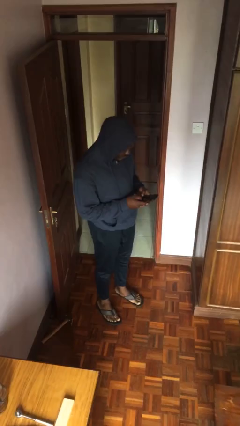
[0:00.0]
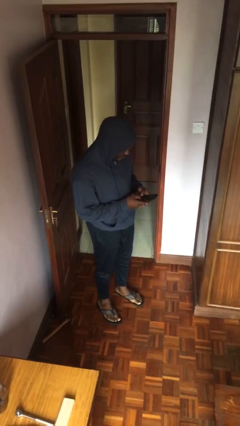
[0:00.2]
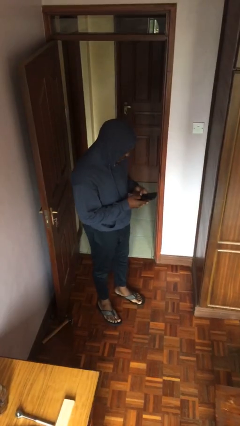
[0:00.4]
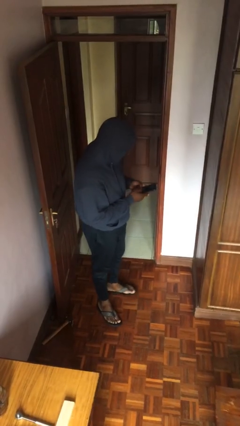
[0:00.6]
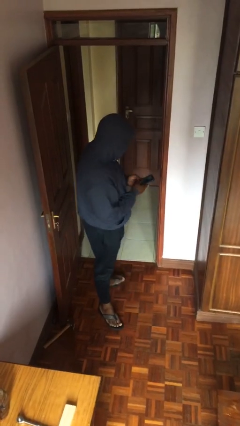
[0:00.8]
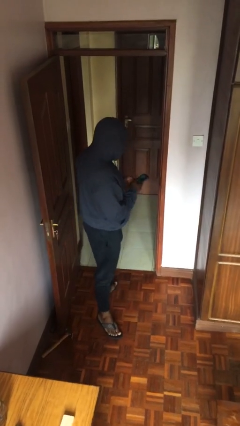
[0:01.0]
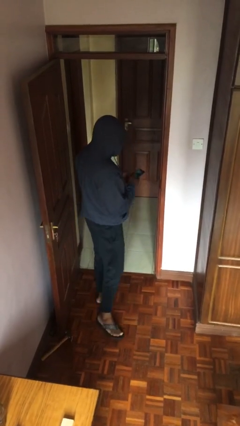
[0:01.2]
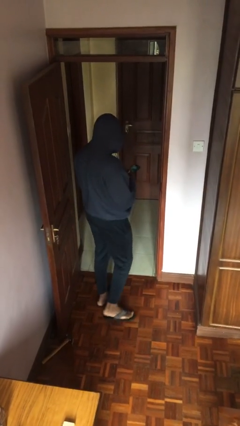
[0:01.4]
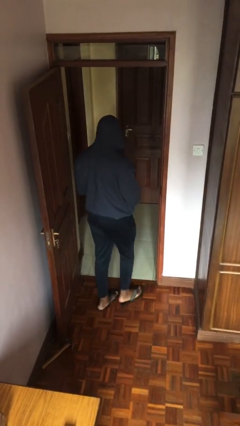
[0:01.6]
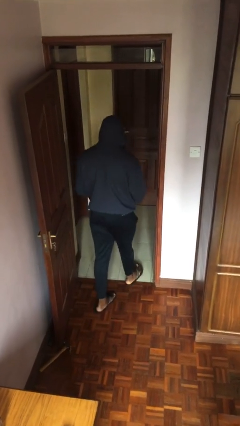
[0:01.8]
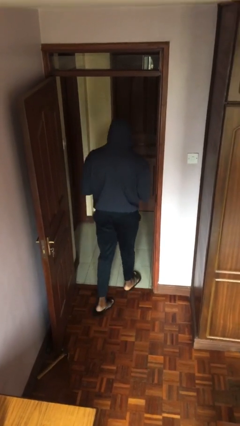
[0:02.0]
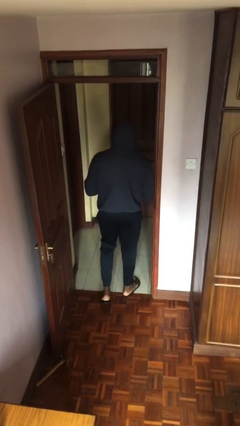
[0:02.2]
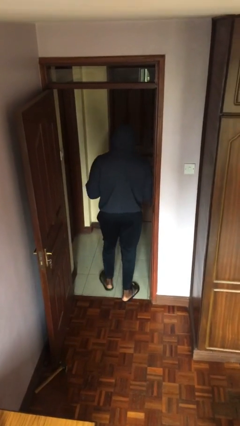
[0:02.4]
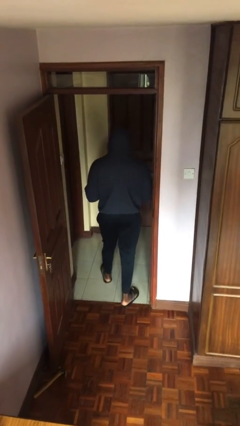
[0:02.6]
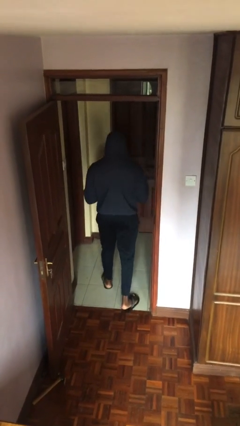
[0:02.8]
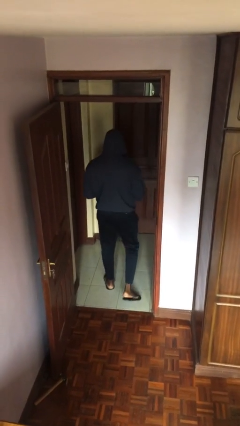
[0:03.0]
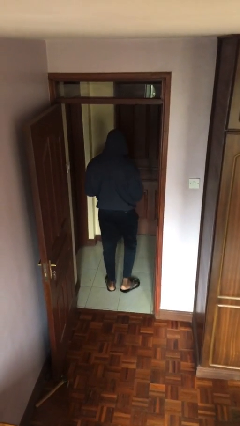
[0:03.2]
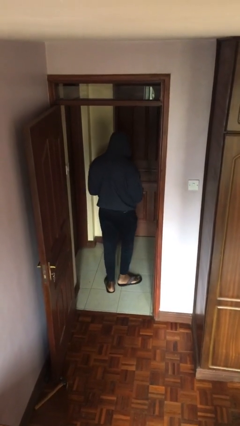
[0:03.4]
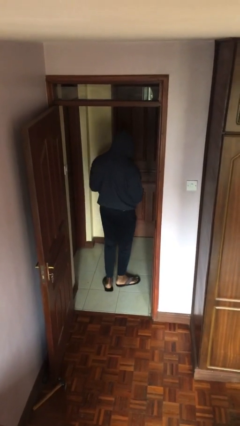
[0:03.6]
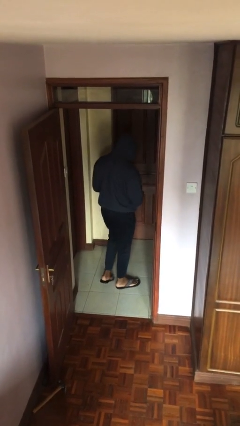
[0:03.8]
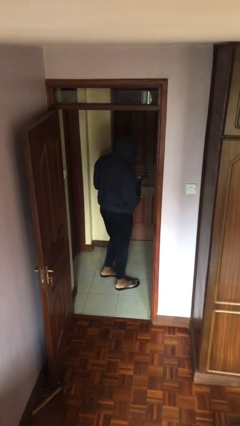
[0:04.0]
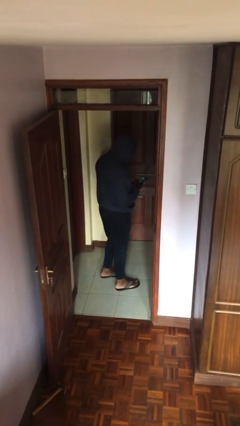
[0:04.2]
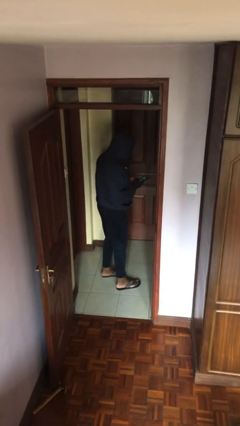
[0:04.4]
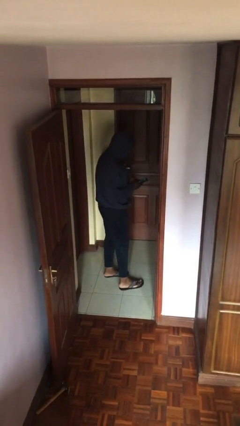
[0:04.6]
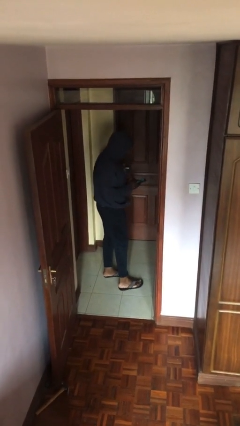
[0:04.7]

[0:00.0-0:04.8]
person exits scene through structure

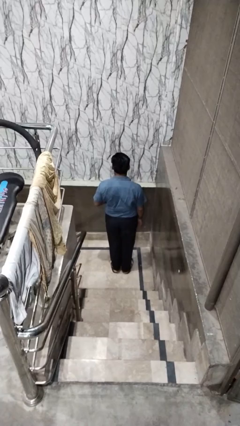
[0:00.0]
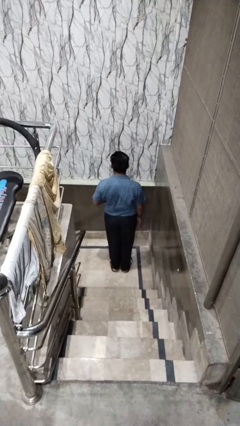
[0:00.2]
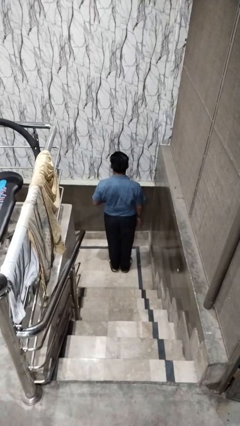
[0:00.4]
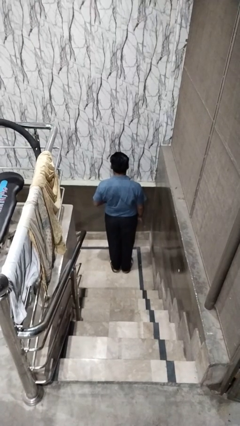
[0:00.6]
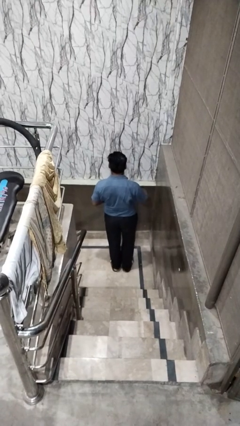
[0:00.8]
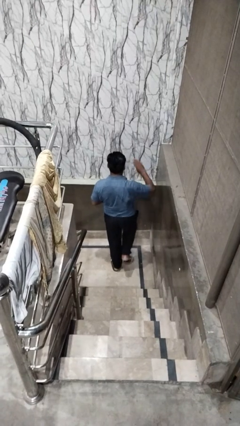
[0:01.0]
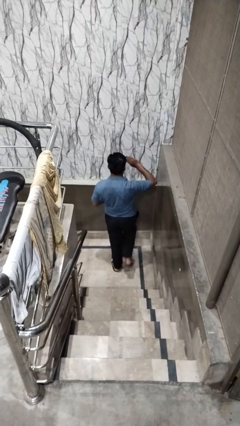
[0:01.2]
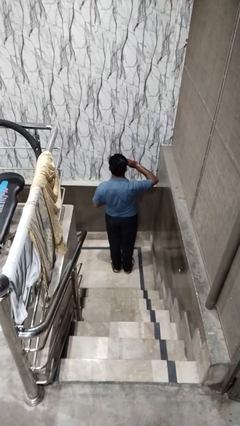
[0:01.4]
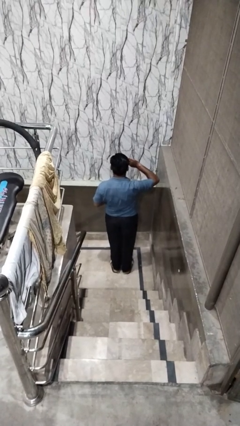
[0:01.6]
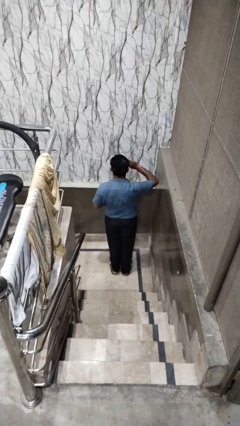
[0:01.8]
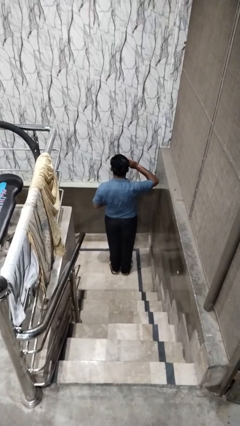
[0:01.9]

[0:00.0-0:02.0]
person salutes

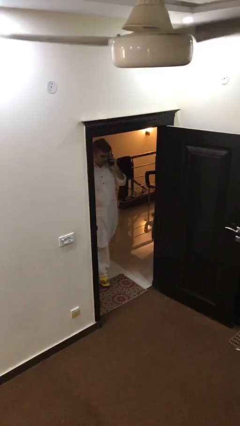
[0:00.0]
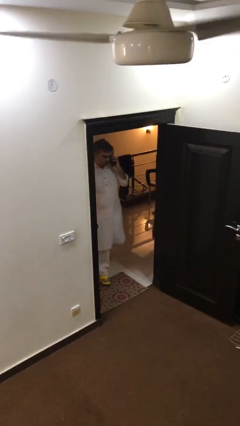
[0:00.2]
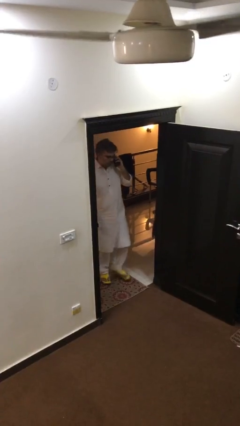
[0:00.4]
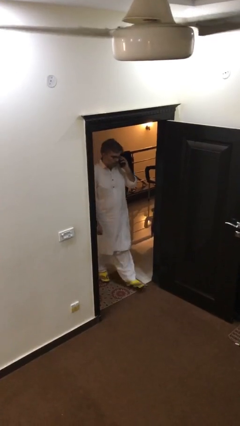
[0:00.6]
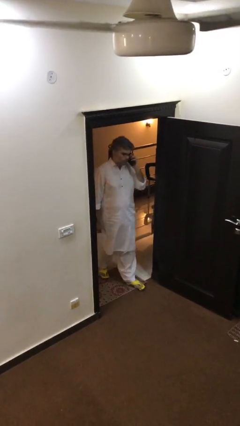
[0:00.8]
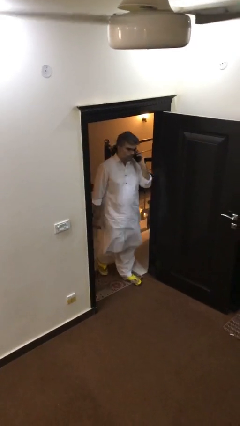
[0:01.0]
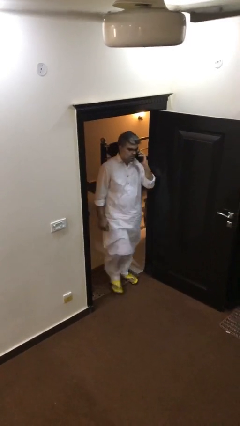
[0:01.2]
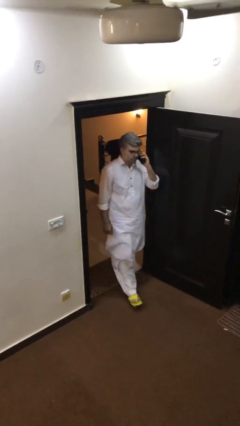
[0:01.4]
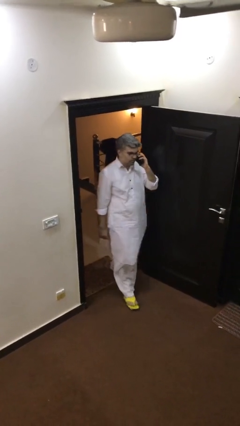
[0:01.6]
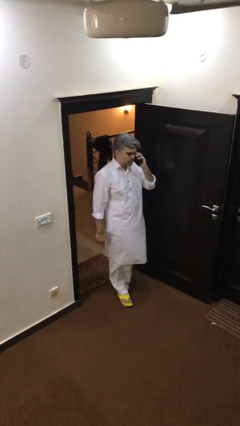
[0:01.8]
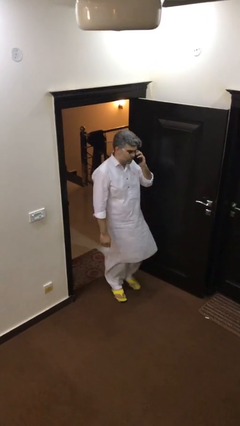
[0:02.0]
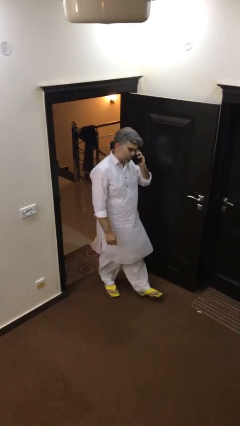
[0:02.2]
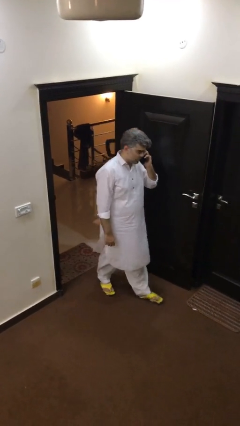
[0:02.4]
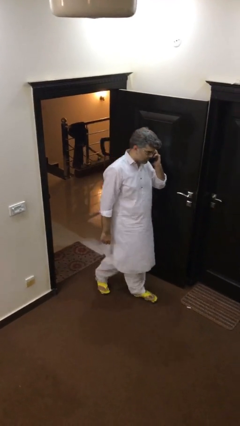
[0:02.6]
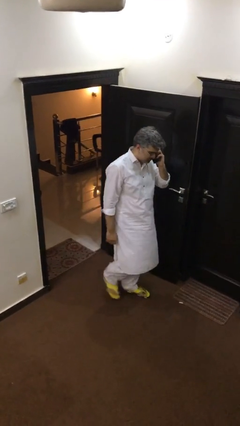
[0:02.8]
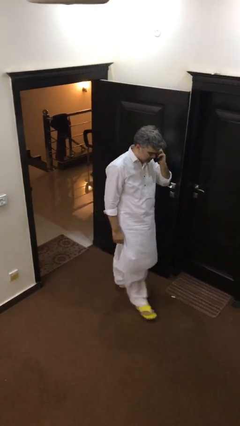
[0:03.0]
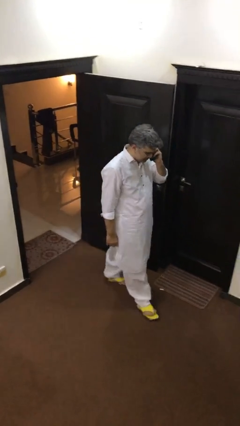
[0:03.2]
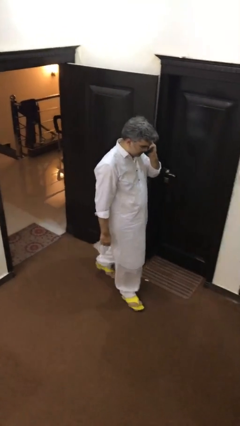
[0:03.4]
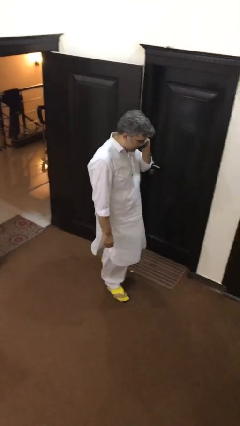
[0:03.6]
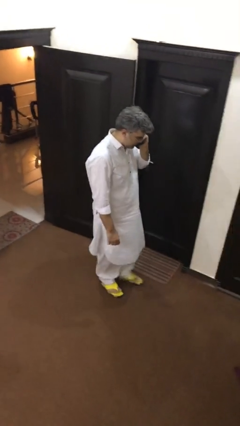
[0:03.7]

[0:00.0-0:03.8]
person enters scene through structure

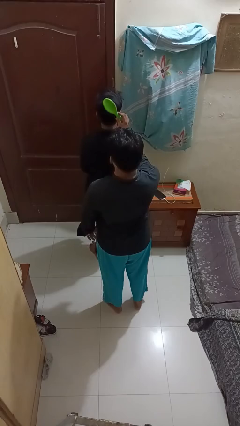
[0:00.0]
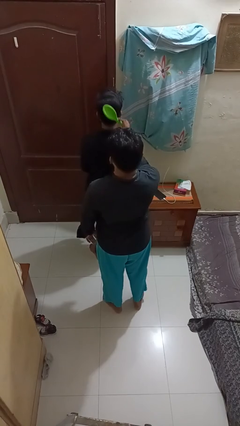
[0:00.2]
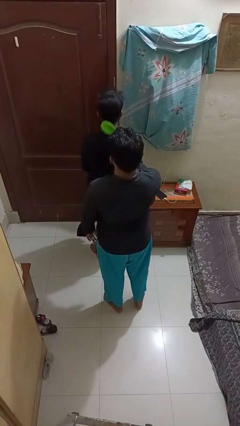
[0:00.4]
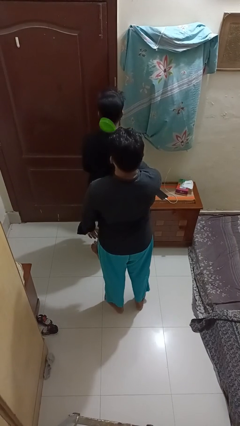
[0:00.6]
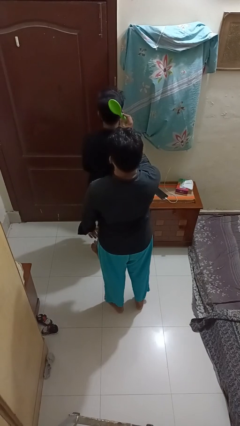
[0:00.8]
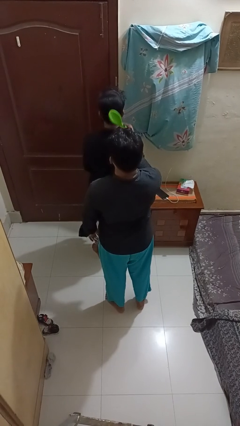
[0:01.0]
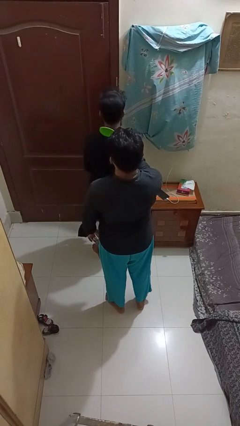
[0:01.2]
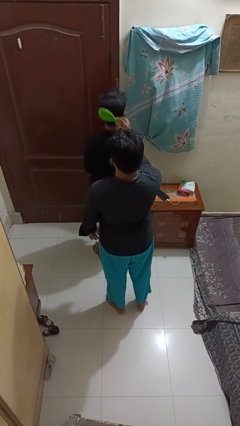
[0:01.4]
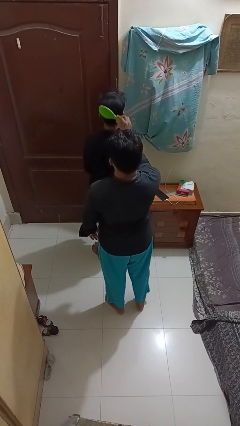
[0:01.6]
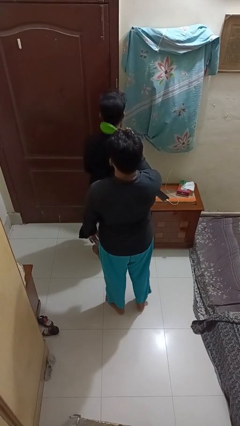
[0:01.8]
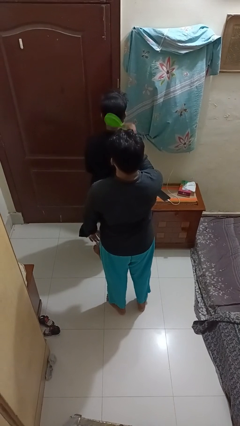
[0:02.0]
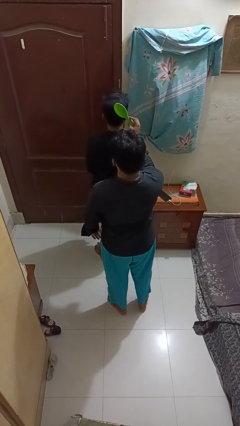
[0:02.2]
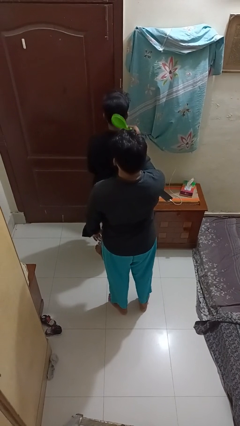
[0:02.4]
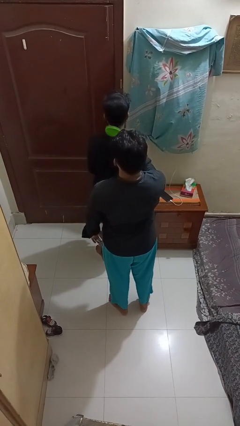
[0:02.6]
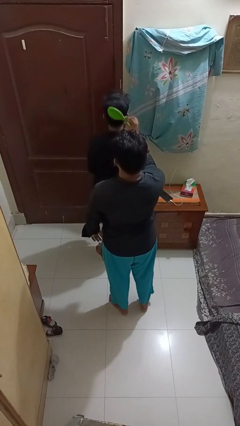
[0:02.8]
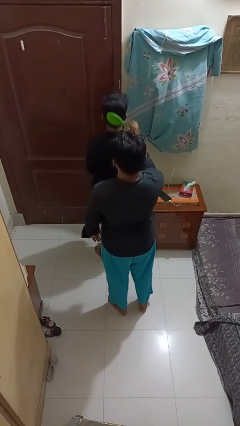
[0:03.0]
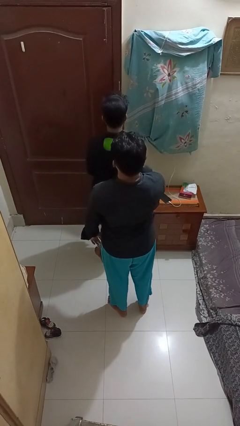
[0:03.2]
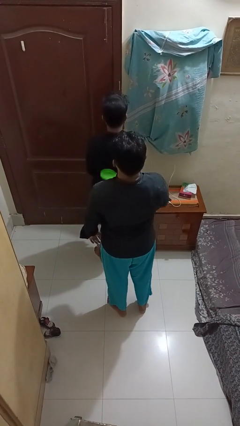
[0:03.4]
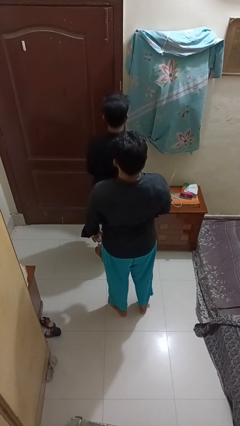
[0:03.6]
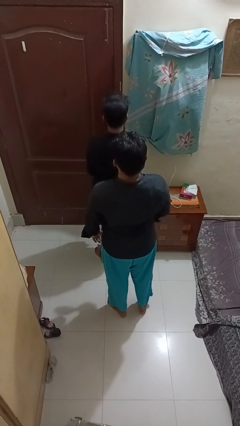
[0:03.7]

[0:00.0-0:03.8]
person brushes hair of person

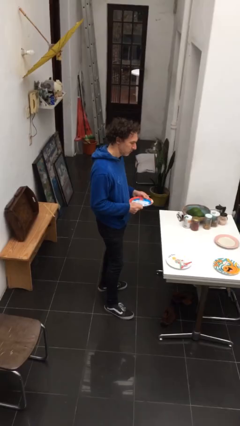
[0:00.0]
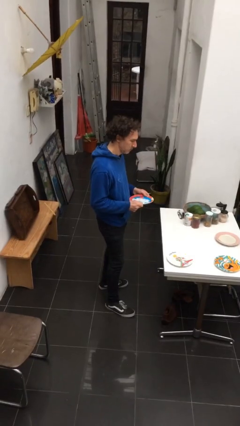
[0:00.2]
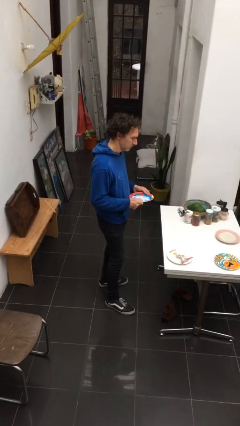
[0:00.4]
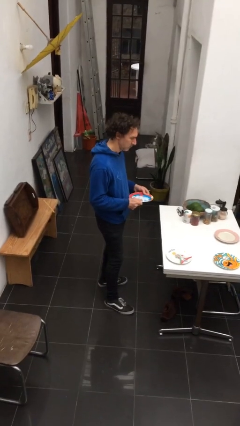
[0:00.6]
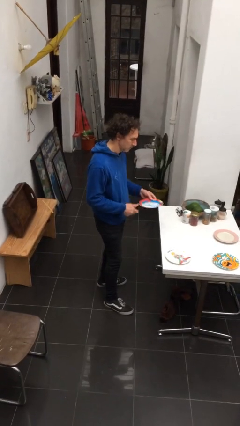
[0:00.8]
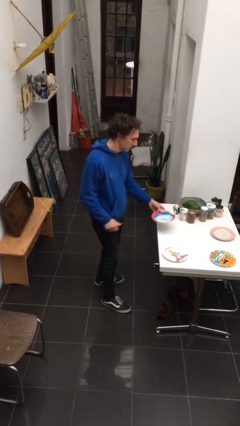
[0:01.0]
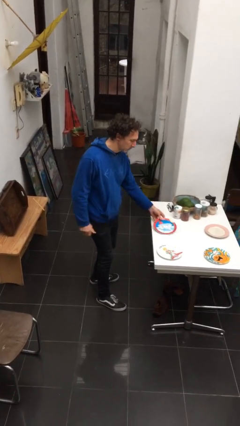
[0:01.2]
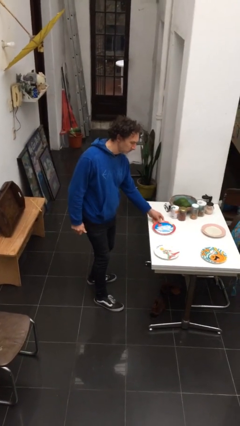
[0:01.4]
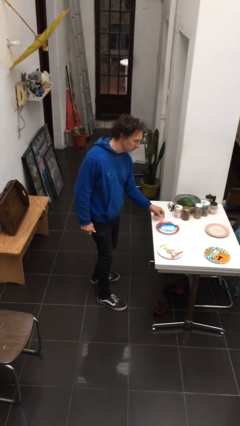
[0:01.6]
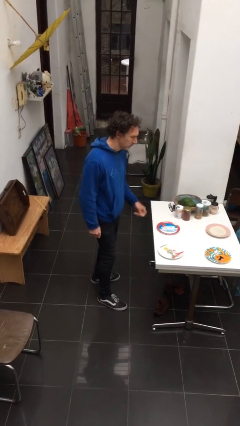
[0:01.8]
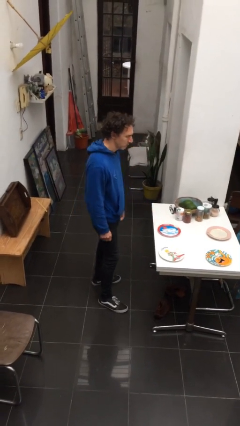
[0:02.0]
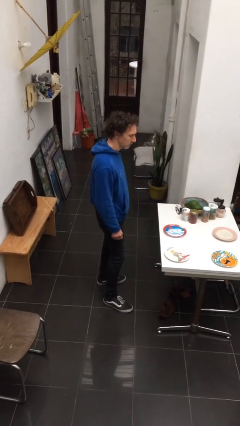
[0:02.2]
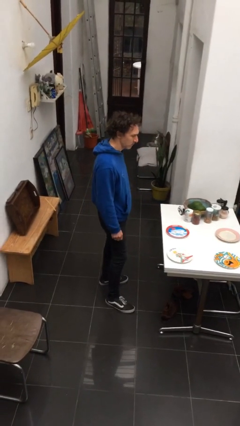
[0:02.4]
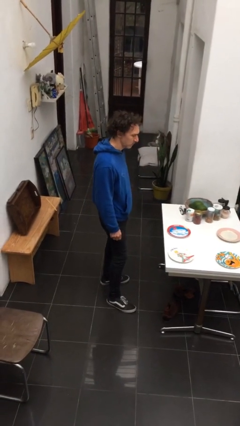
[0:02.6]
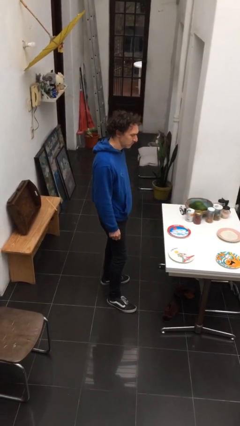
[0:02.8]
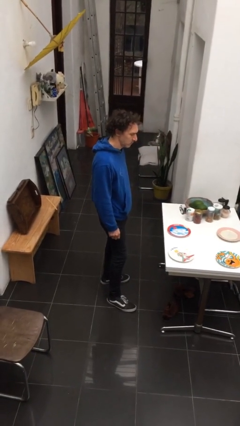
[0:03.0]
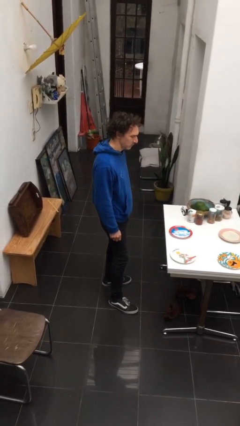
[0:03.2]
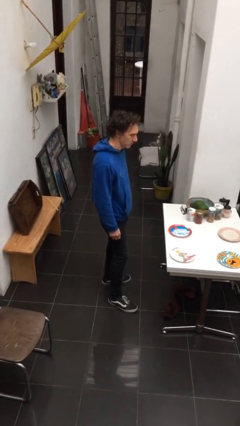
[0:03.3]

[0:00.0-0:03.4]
person sets table
